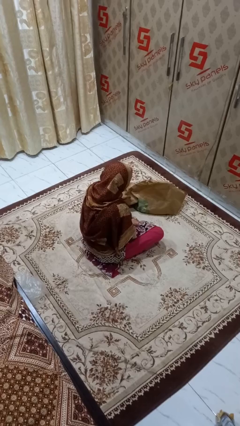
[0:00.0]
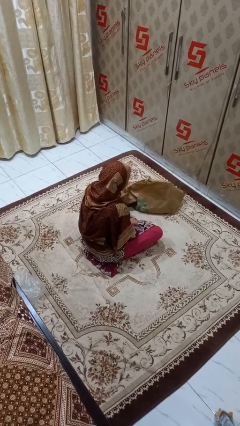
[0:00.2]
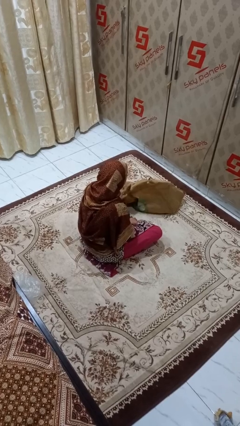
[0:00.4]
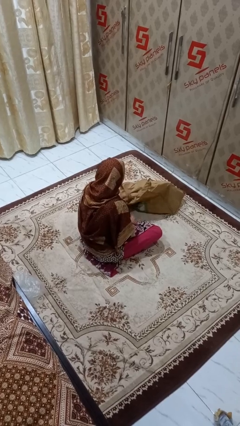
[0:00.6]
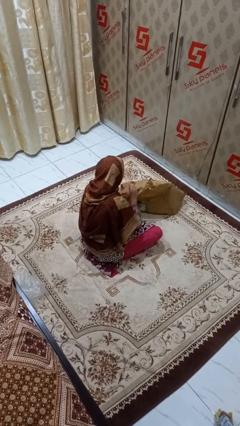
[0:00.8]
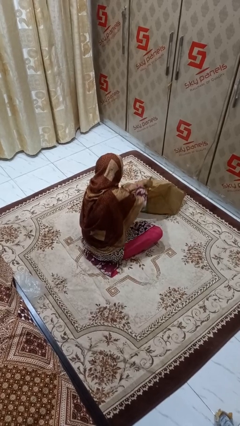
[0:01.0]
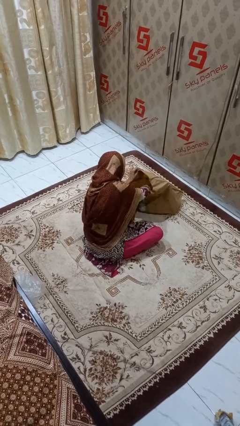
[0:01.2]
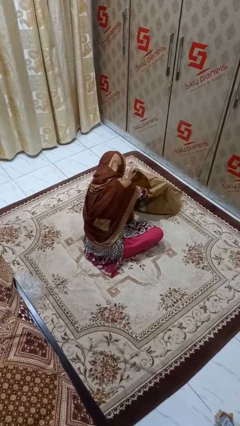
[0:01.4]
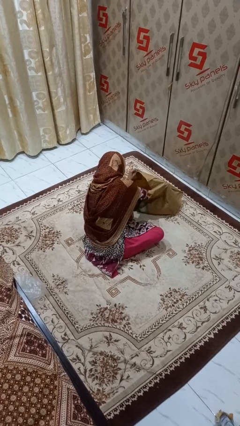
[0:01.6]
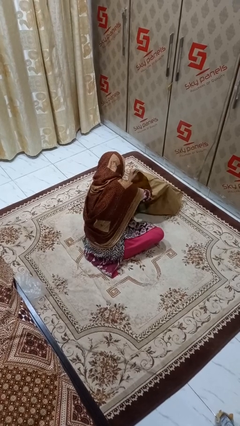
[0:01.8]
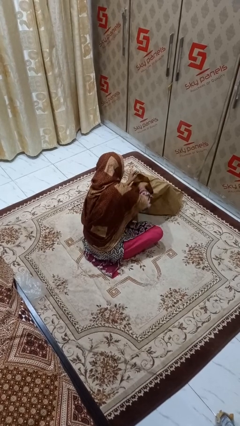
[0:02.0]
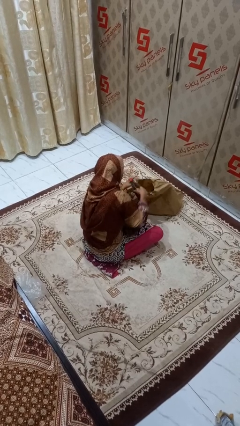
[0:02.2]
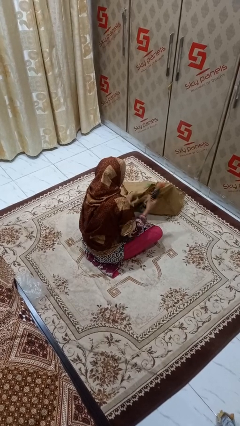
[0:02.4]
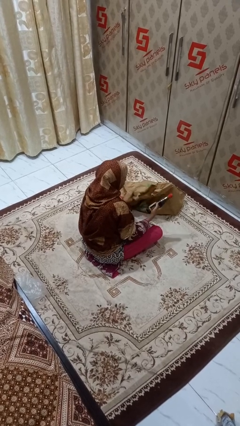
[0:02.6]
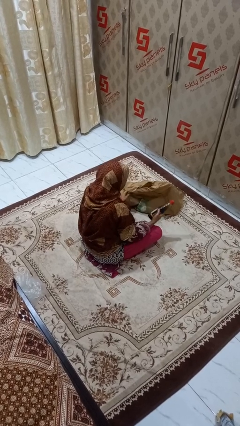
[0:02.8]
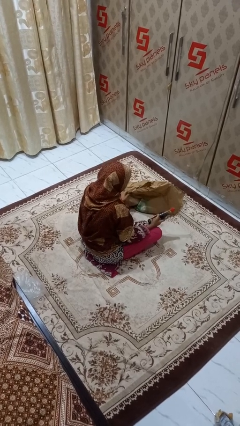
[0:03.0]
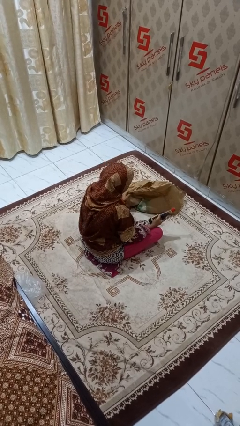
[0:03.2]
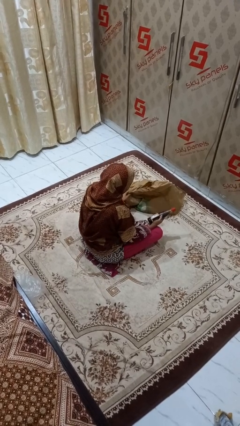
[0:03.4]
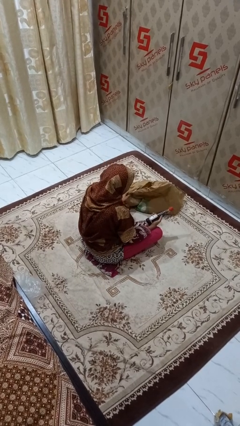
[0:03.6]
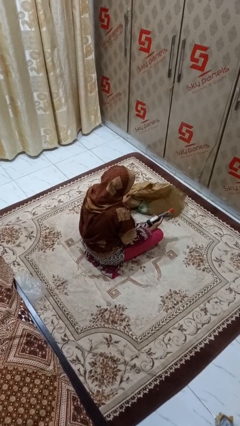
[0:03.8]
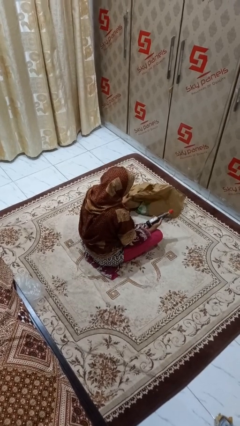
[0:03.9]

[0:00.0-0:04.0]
person takes object from bag

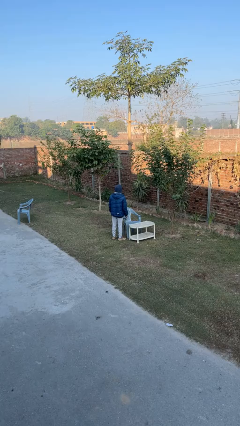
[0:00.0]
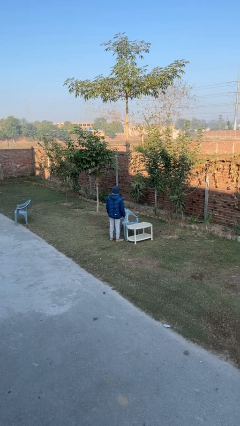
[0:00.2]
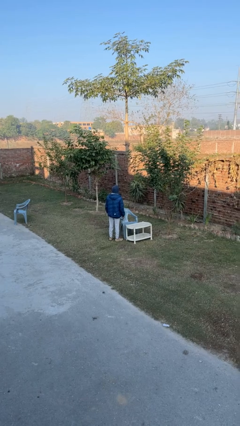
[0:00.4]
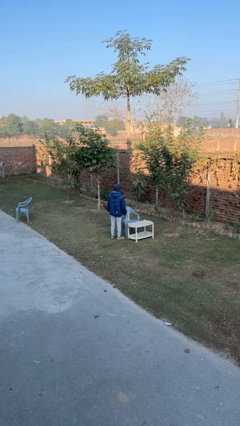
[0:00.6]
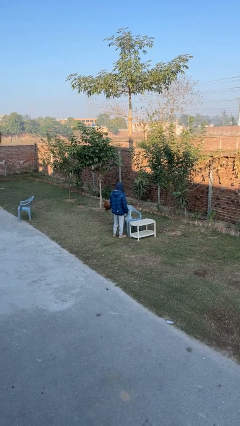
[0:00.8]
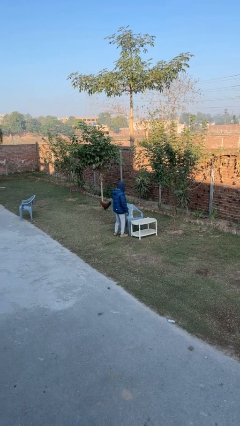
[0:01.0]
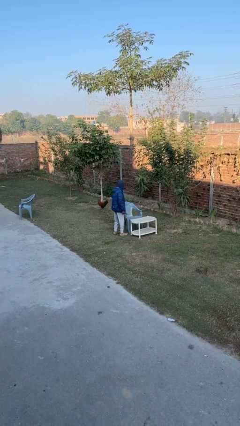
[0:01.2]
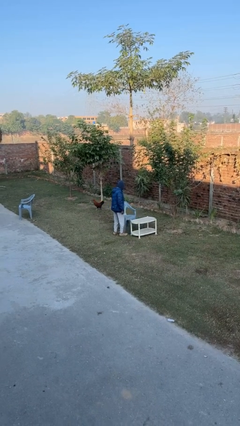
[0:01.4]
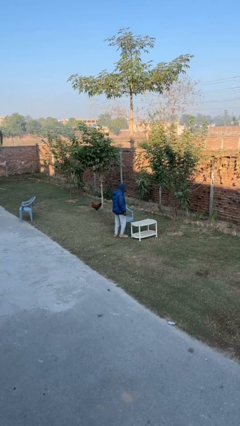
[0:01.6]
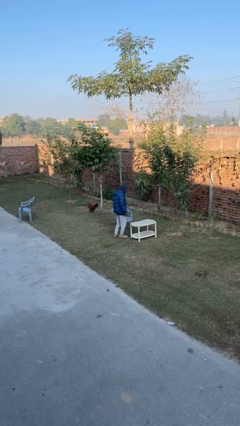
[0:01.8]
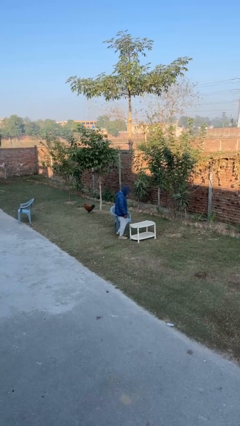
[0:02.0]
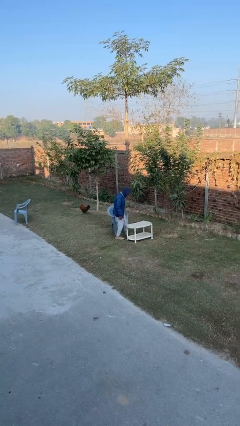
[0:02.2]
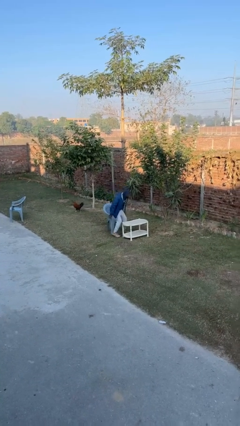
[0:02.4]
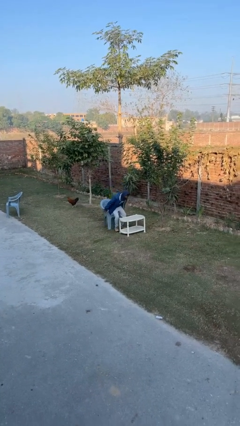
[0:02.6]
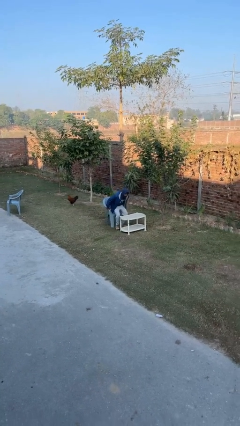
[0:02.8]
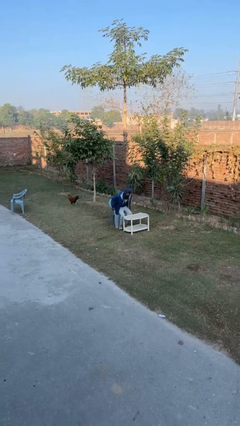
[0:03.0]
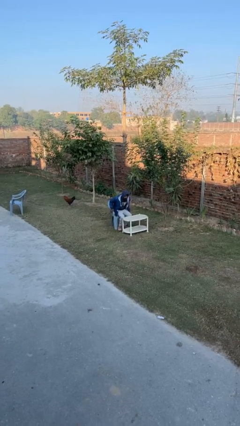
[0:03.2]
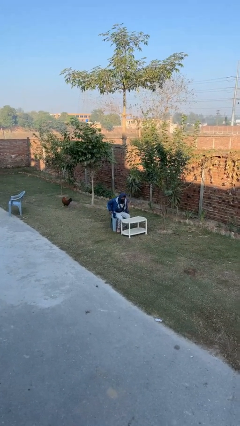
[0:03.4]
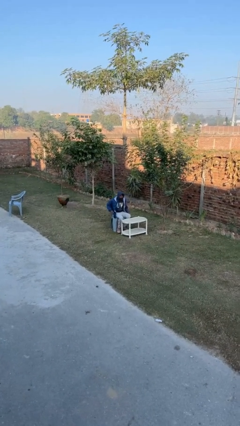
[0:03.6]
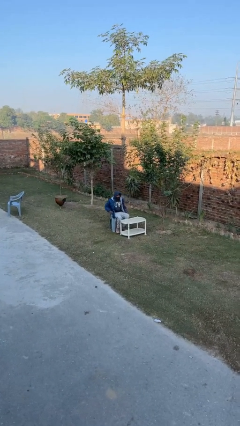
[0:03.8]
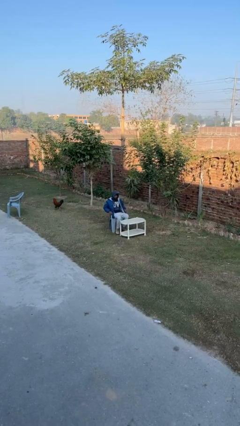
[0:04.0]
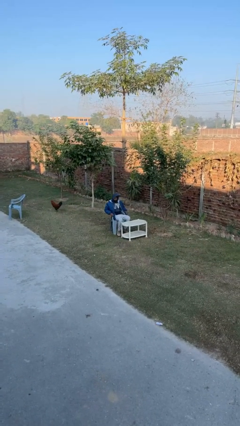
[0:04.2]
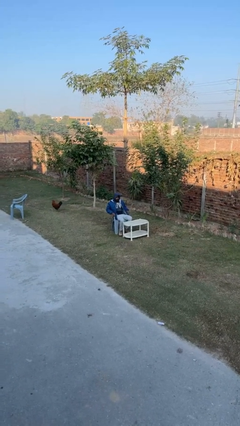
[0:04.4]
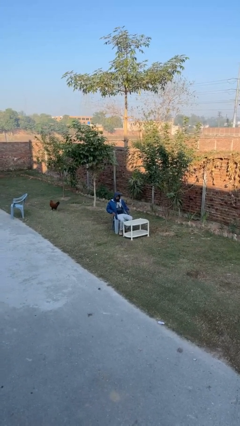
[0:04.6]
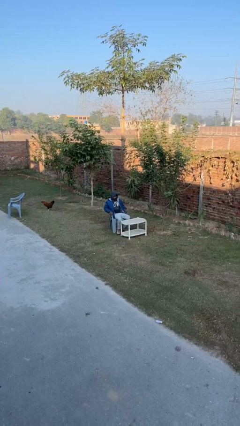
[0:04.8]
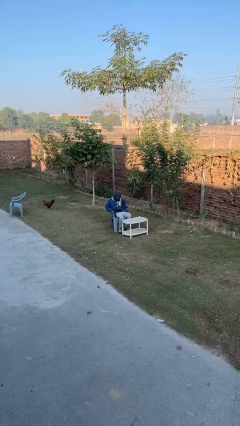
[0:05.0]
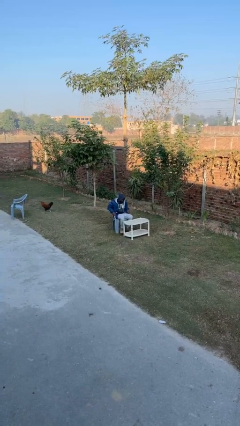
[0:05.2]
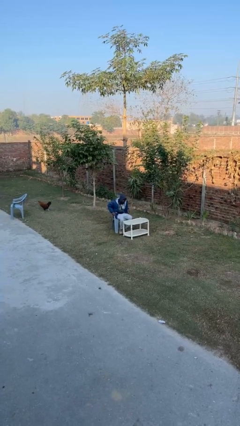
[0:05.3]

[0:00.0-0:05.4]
person sits down

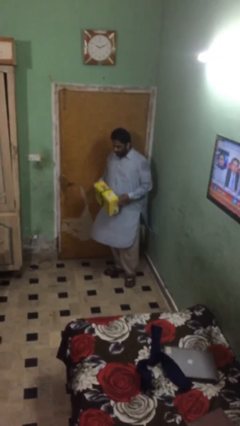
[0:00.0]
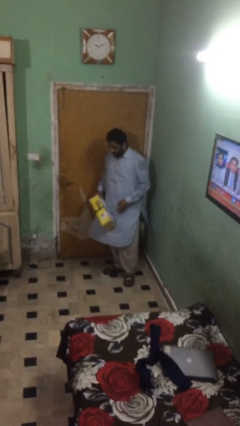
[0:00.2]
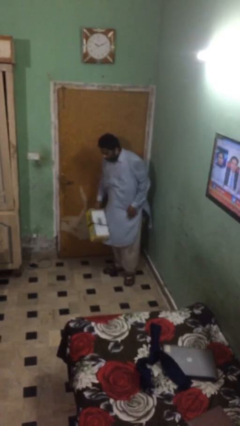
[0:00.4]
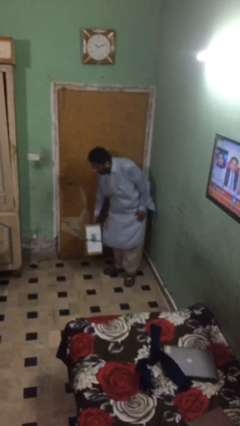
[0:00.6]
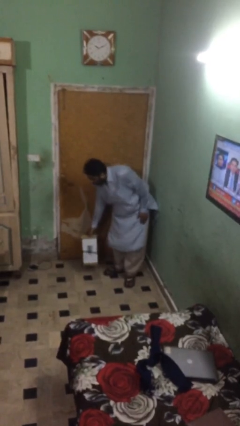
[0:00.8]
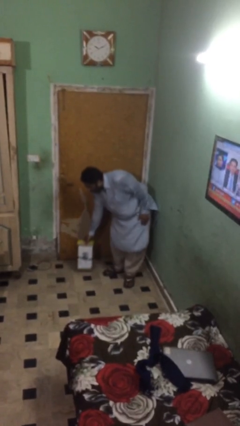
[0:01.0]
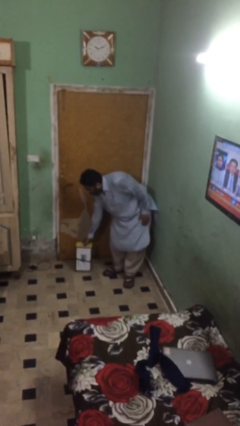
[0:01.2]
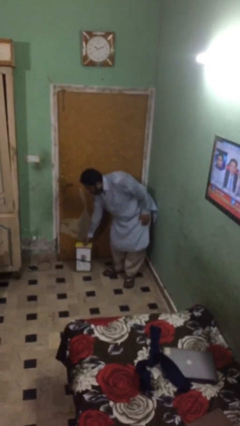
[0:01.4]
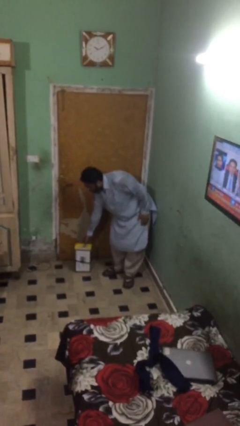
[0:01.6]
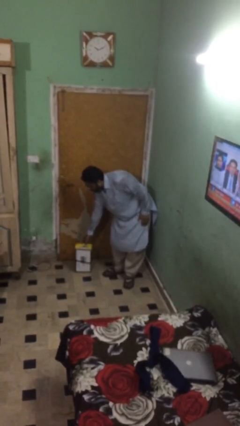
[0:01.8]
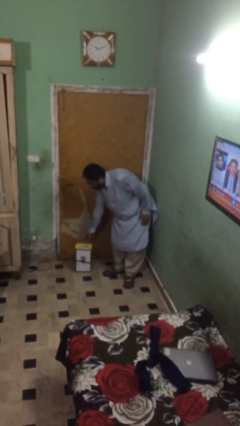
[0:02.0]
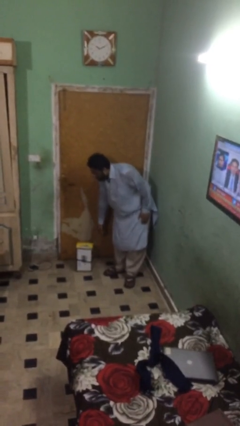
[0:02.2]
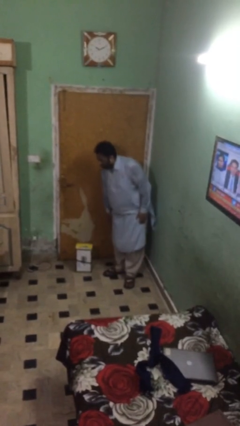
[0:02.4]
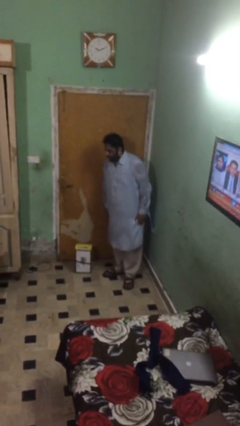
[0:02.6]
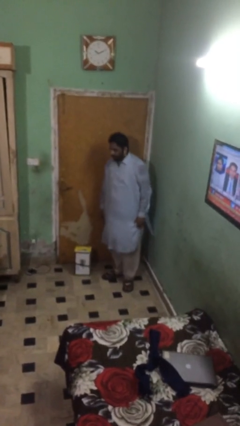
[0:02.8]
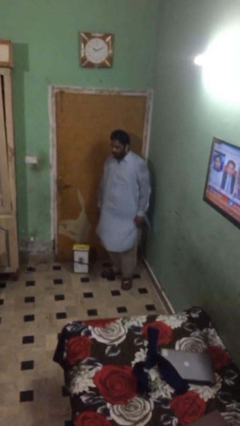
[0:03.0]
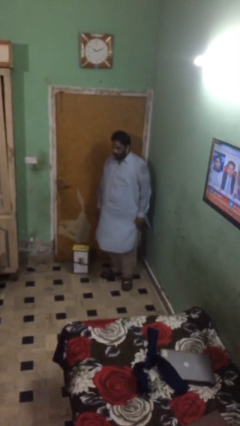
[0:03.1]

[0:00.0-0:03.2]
person puts down object on floor

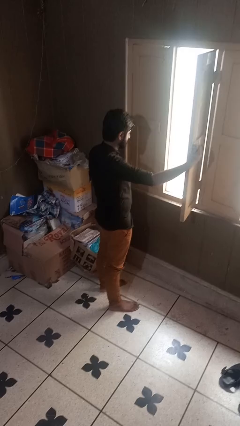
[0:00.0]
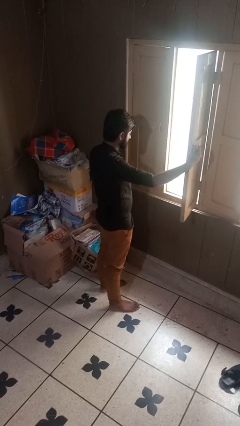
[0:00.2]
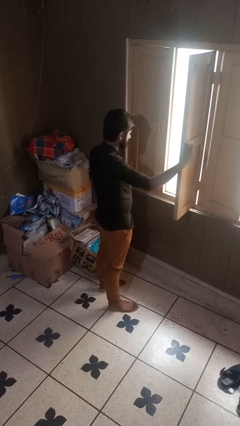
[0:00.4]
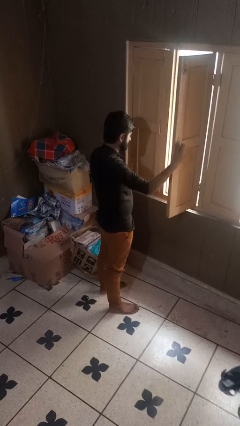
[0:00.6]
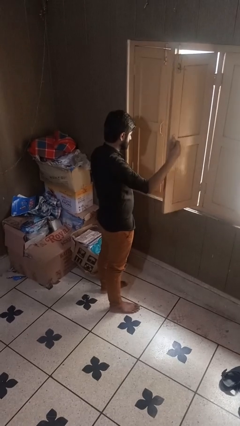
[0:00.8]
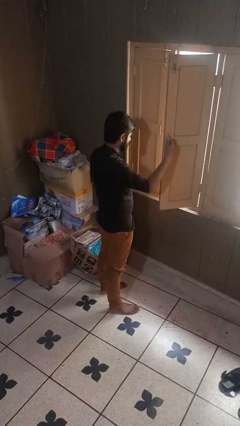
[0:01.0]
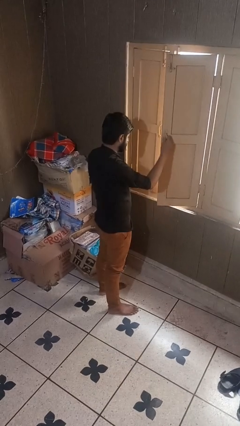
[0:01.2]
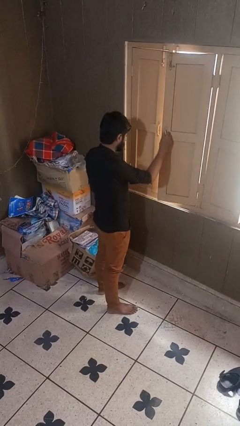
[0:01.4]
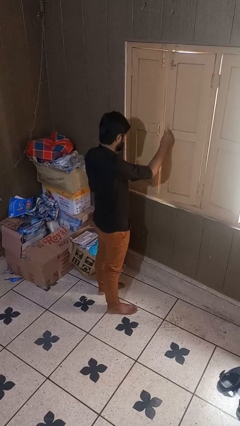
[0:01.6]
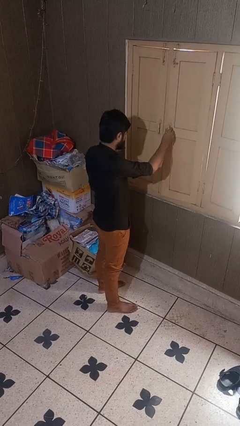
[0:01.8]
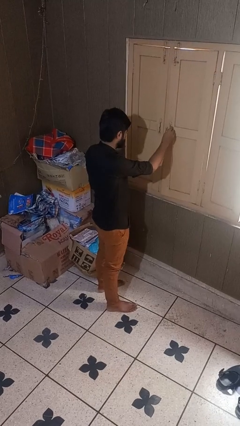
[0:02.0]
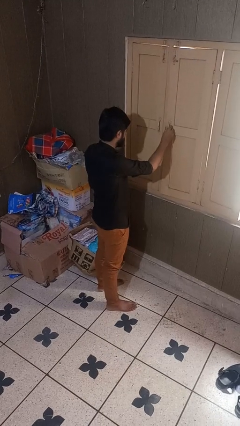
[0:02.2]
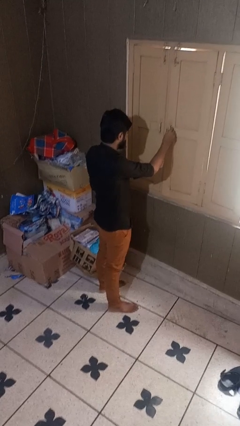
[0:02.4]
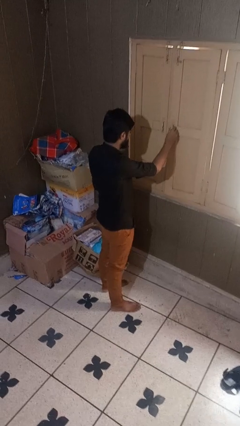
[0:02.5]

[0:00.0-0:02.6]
person closes home window

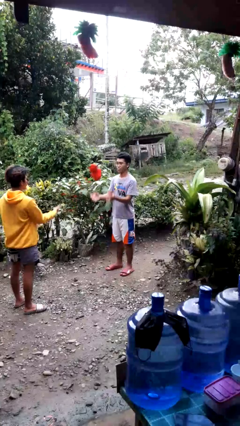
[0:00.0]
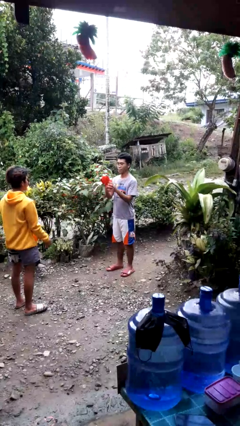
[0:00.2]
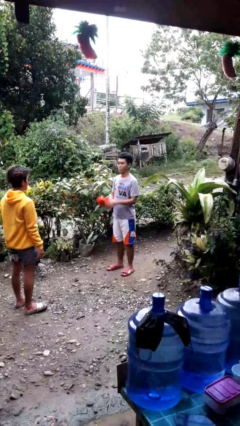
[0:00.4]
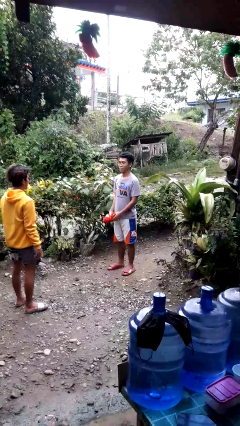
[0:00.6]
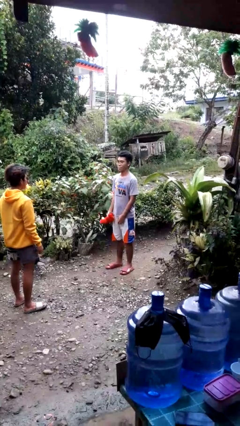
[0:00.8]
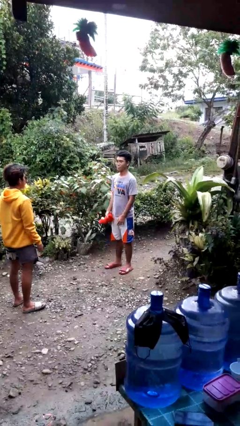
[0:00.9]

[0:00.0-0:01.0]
person catches object from person

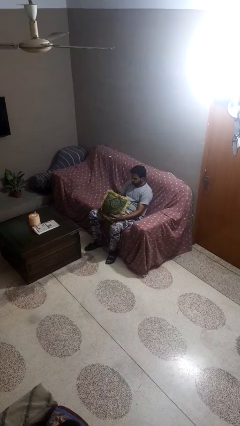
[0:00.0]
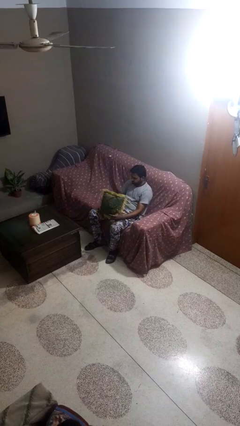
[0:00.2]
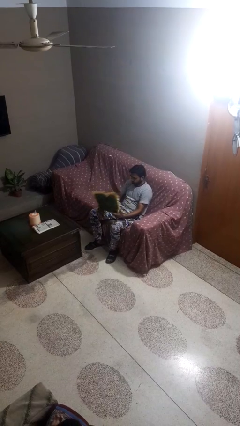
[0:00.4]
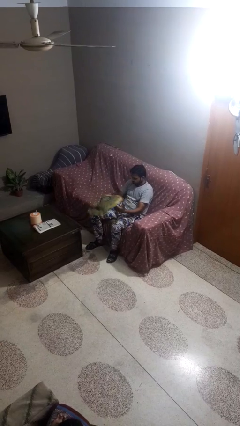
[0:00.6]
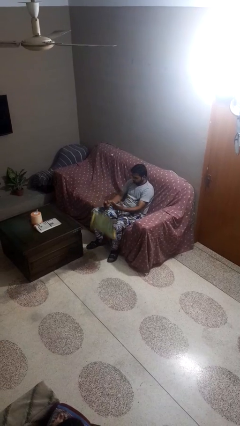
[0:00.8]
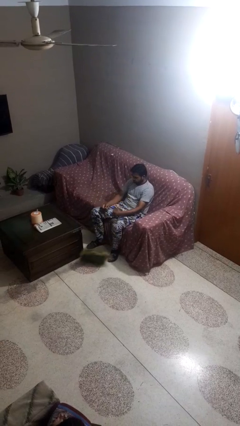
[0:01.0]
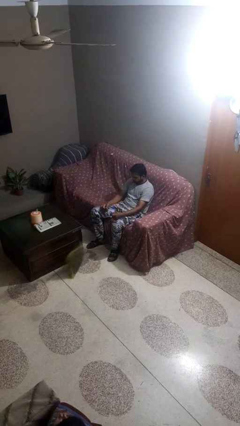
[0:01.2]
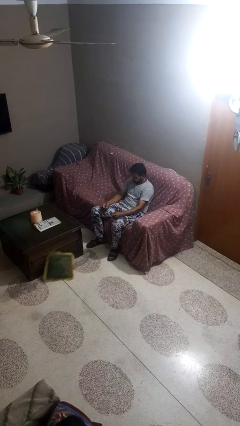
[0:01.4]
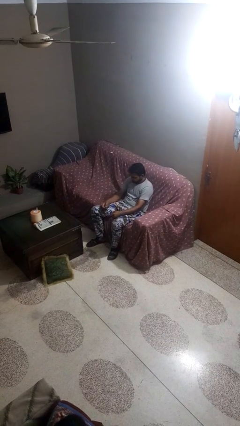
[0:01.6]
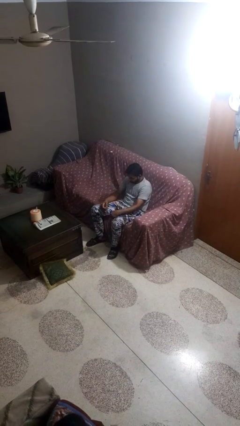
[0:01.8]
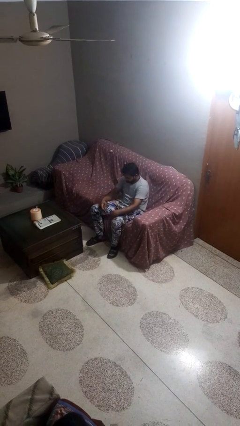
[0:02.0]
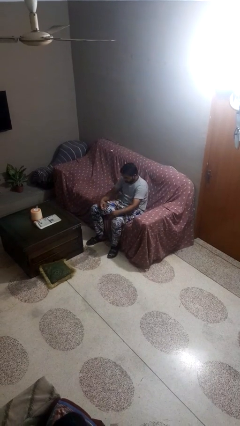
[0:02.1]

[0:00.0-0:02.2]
person drops object
